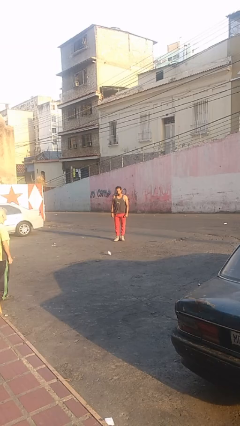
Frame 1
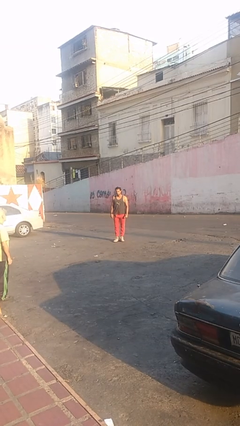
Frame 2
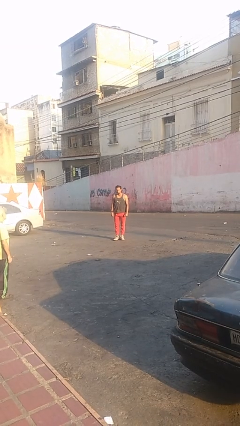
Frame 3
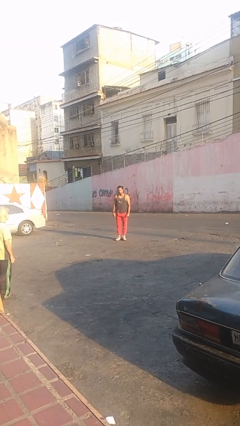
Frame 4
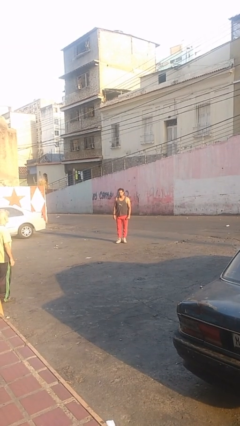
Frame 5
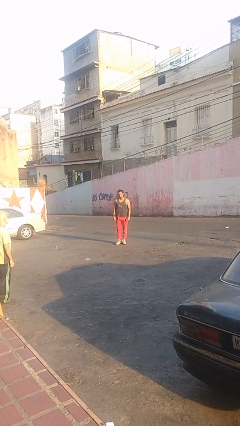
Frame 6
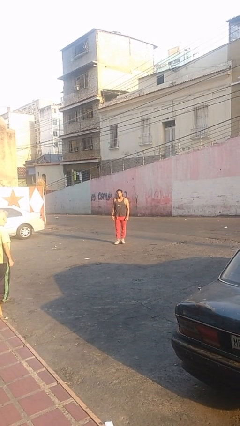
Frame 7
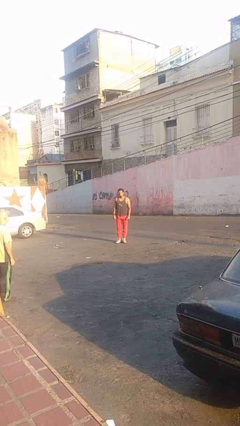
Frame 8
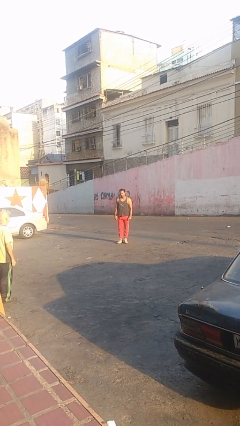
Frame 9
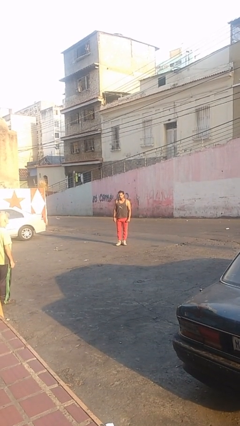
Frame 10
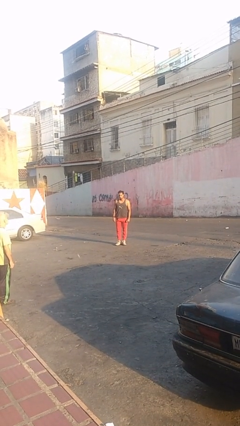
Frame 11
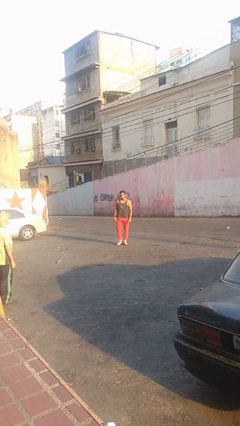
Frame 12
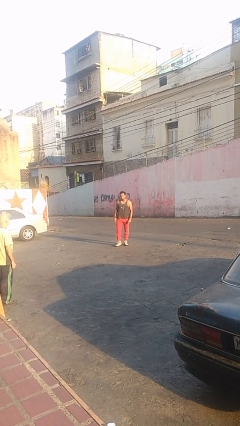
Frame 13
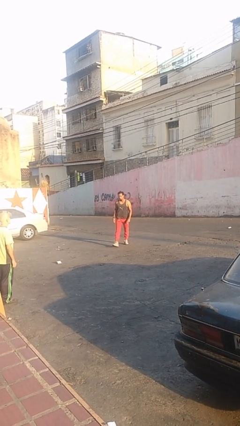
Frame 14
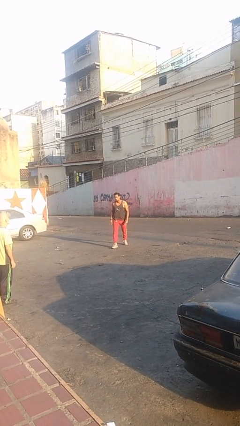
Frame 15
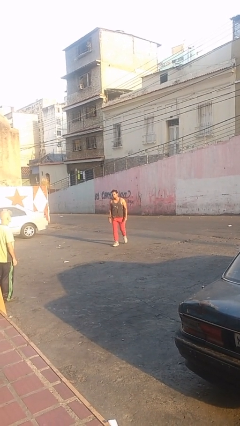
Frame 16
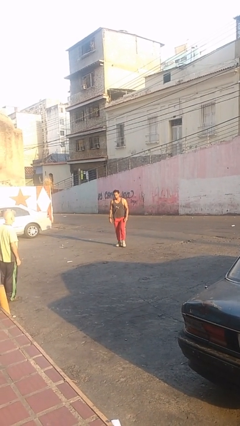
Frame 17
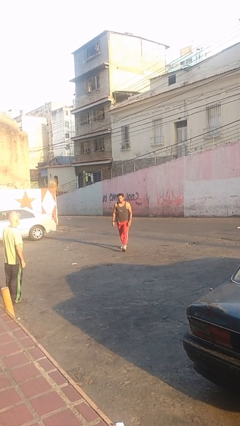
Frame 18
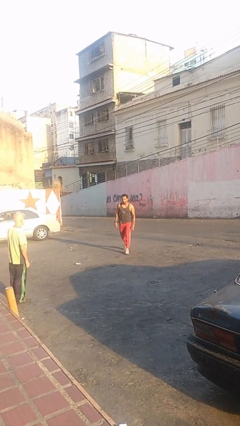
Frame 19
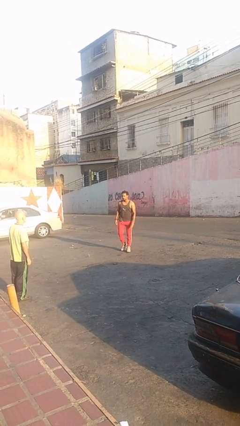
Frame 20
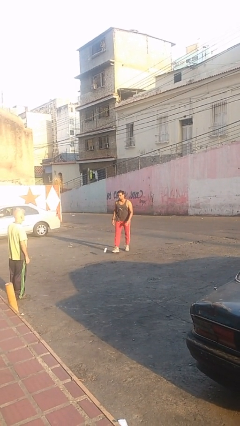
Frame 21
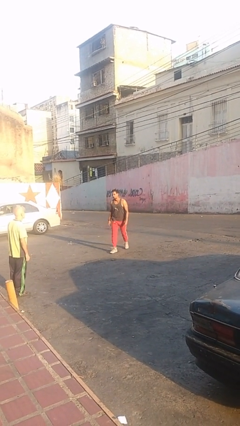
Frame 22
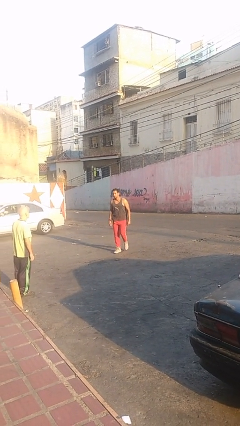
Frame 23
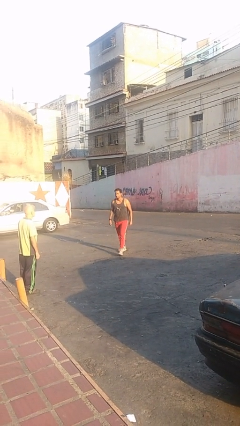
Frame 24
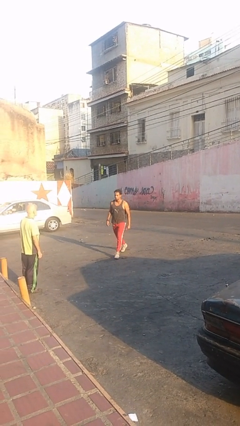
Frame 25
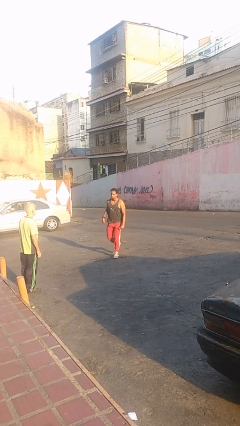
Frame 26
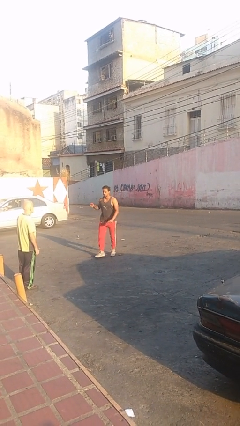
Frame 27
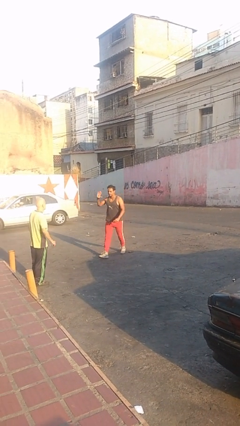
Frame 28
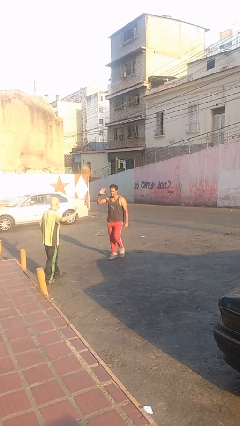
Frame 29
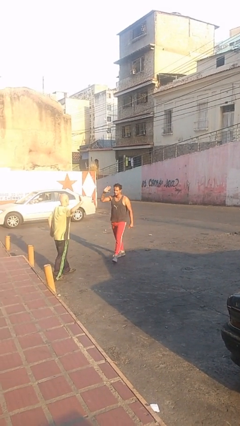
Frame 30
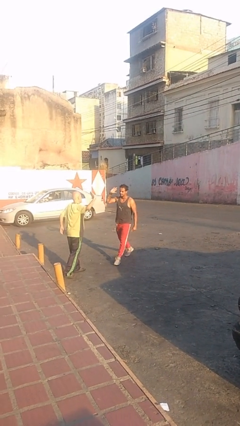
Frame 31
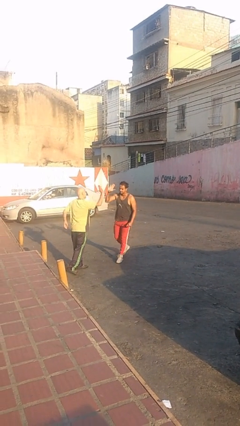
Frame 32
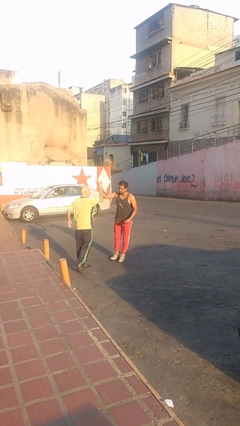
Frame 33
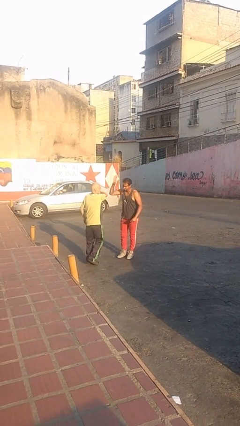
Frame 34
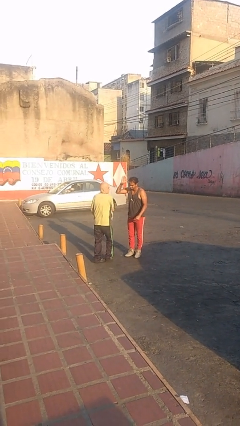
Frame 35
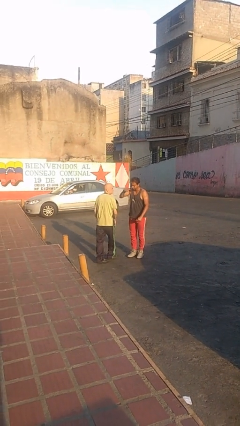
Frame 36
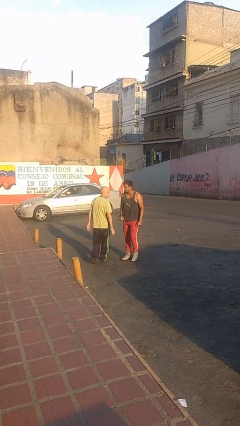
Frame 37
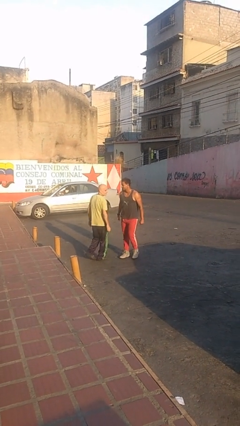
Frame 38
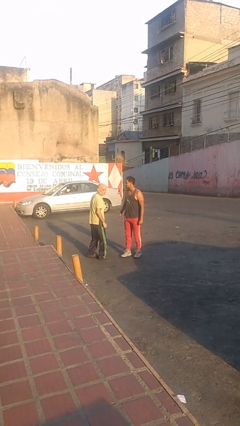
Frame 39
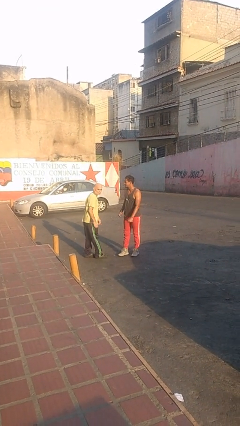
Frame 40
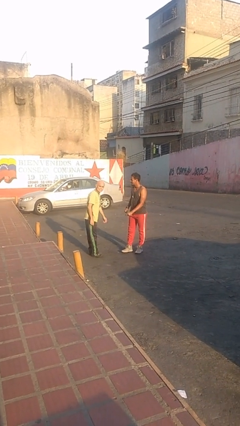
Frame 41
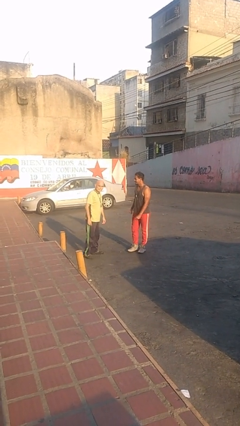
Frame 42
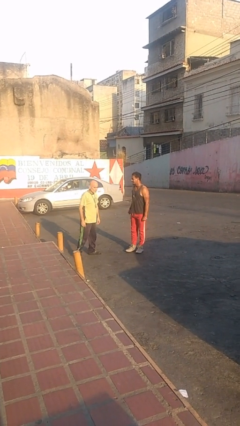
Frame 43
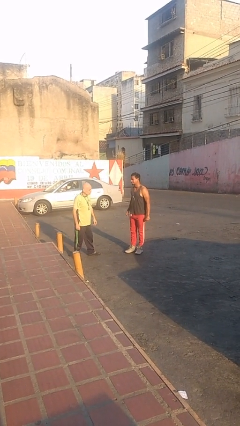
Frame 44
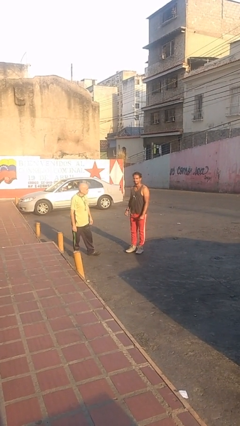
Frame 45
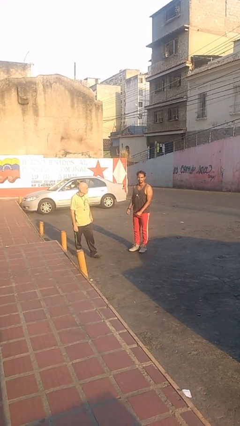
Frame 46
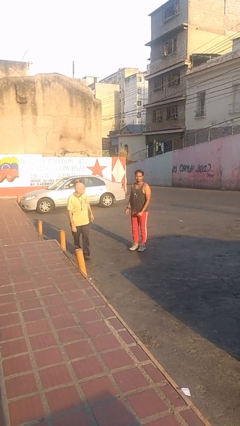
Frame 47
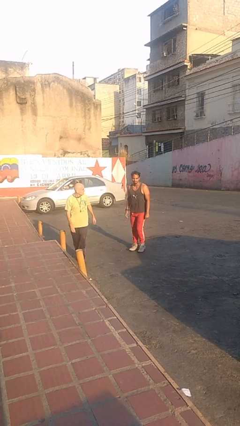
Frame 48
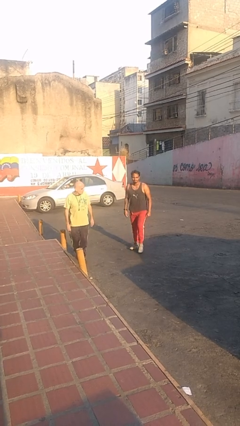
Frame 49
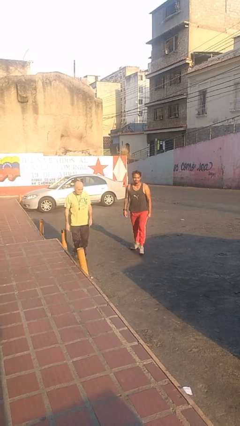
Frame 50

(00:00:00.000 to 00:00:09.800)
person highfives hand

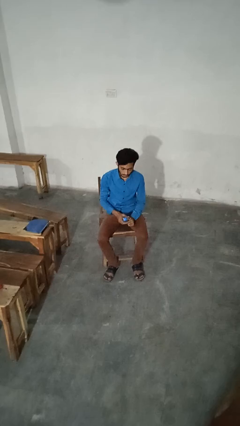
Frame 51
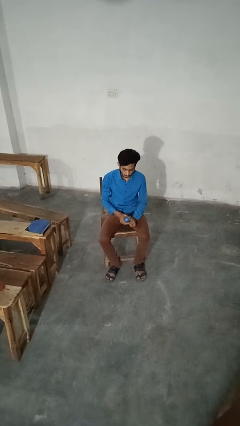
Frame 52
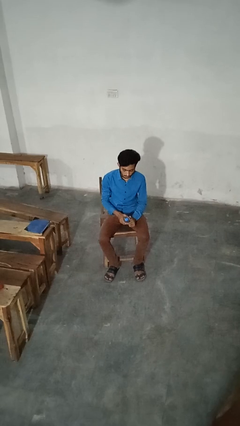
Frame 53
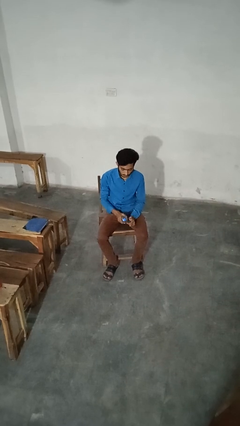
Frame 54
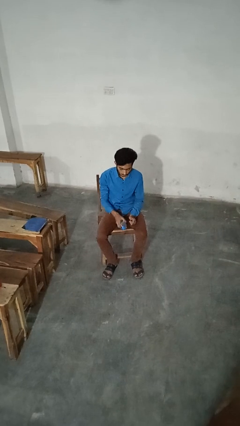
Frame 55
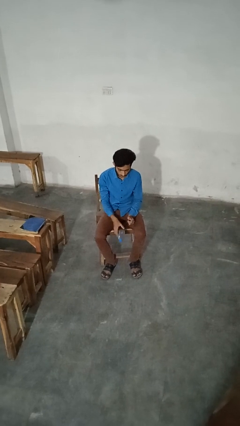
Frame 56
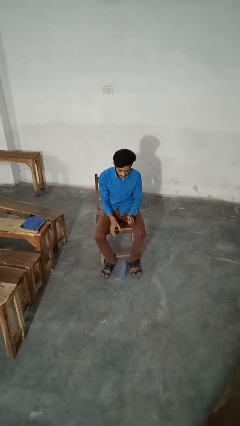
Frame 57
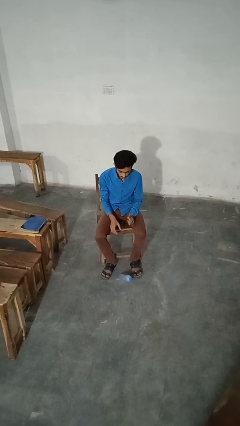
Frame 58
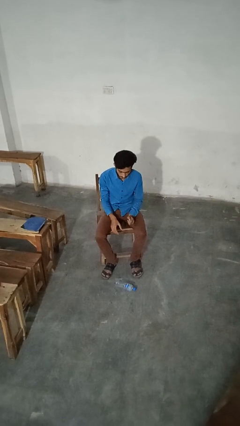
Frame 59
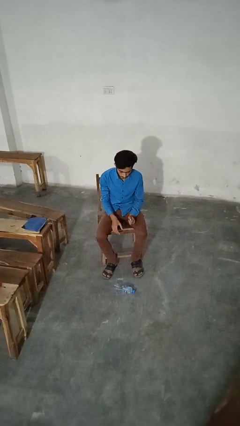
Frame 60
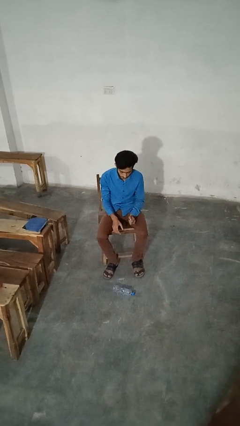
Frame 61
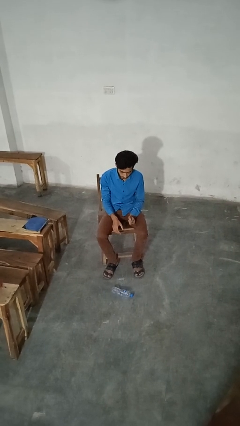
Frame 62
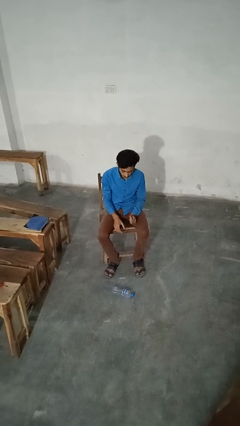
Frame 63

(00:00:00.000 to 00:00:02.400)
person drops object

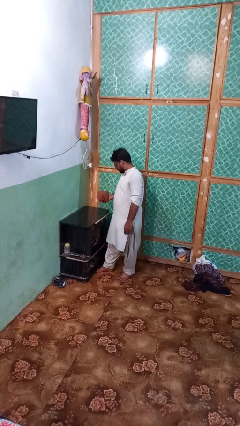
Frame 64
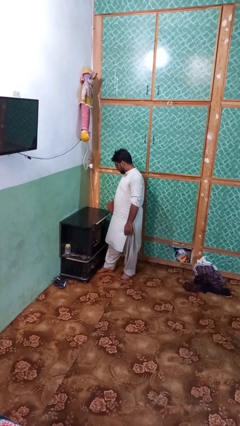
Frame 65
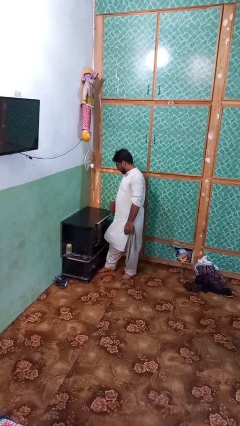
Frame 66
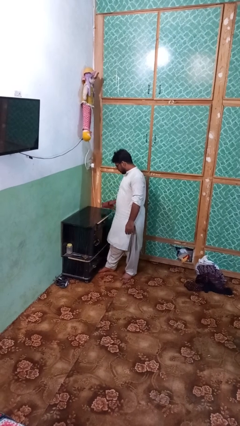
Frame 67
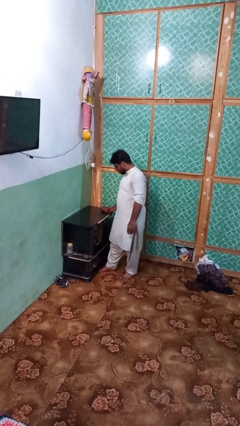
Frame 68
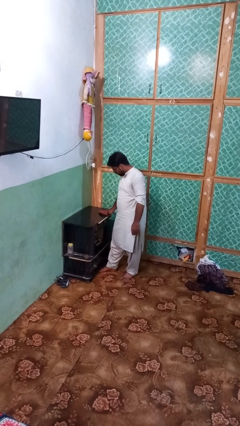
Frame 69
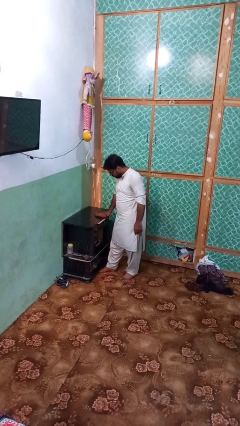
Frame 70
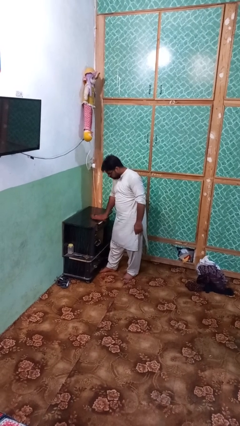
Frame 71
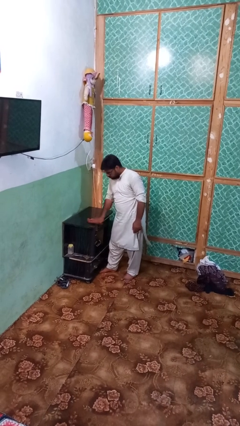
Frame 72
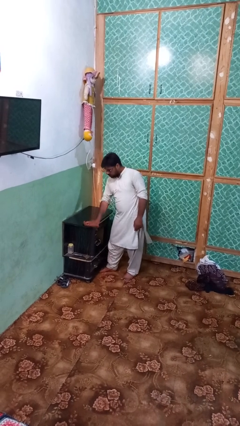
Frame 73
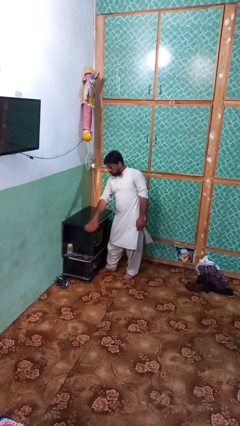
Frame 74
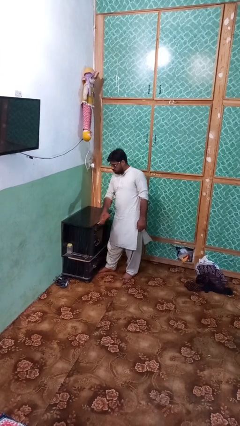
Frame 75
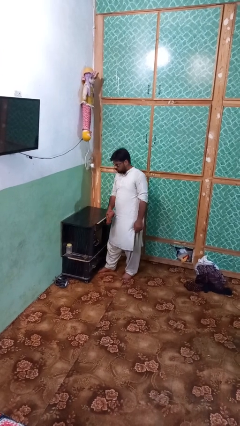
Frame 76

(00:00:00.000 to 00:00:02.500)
person cleans table with rag

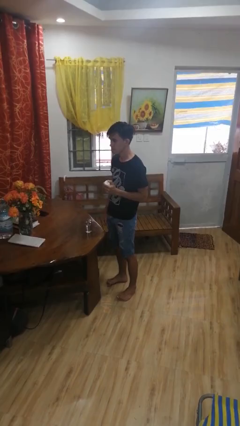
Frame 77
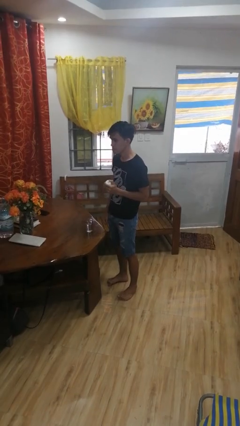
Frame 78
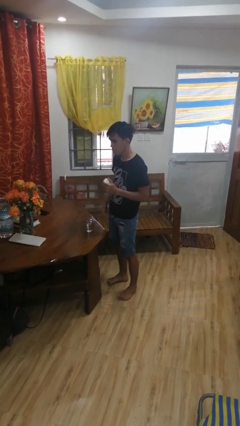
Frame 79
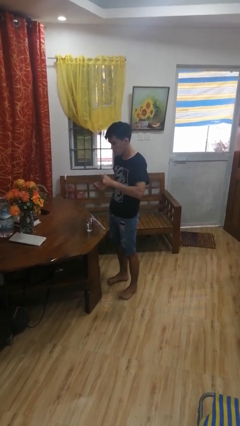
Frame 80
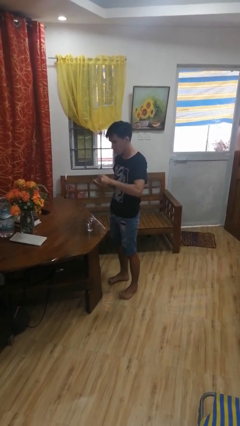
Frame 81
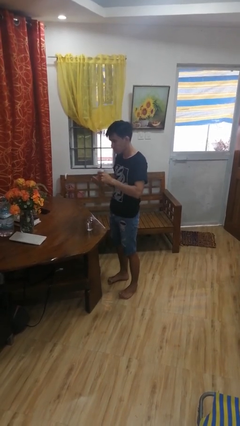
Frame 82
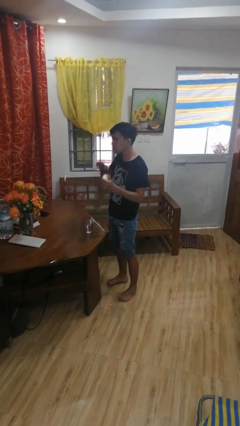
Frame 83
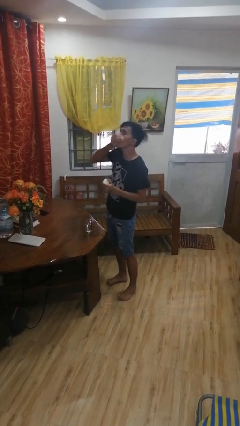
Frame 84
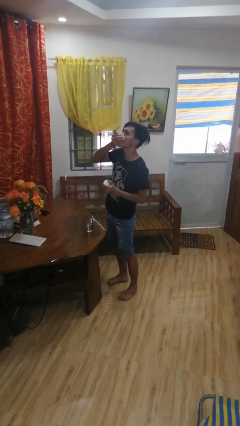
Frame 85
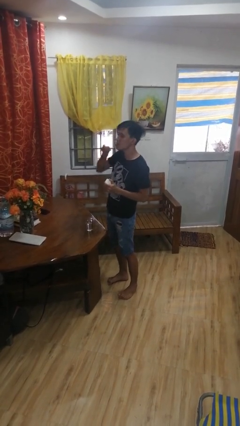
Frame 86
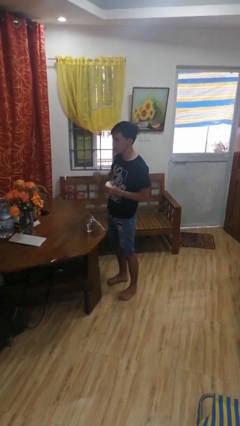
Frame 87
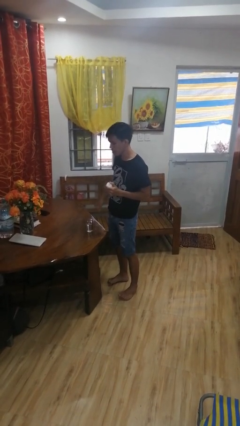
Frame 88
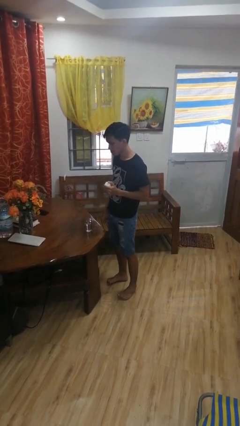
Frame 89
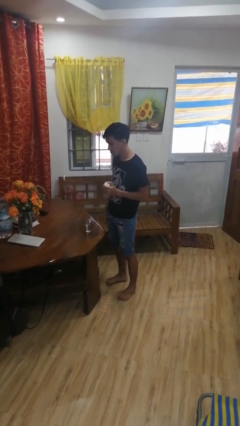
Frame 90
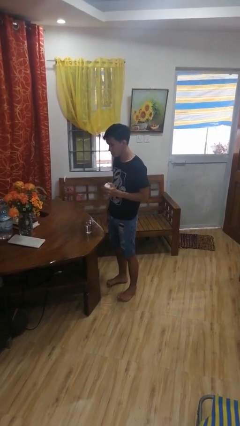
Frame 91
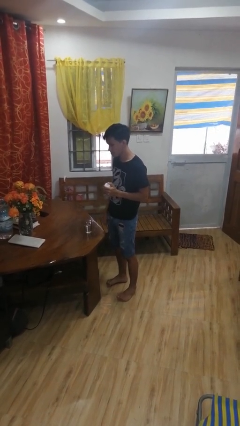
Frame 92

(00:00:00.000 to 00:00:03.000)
person takes medicine pills
